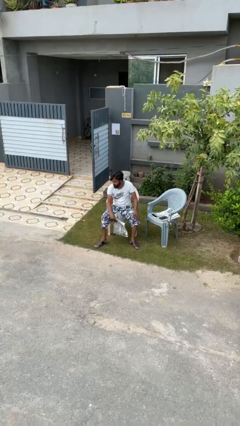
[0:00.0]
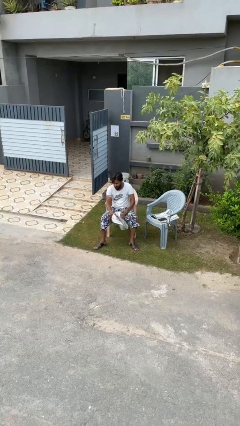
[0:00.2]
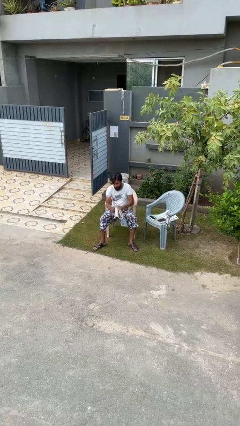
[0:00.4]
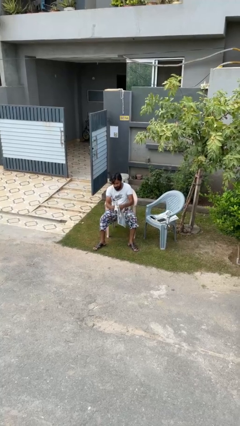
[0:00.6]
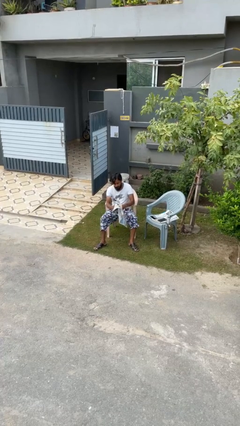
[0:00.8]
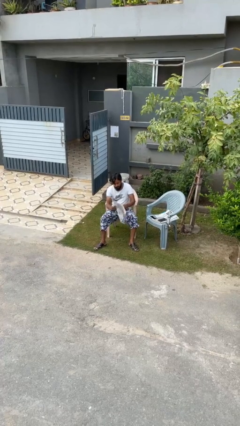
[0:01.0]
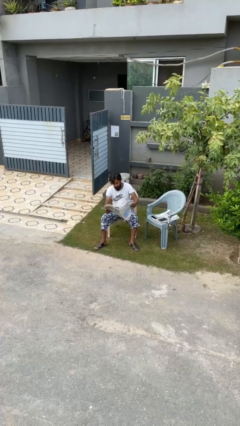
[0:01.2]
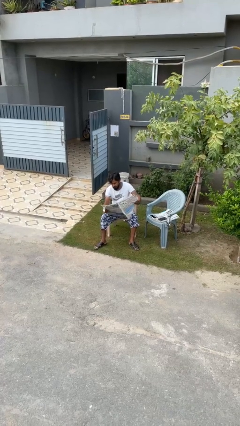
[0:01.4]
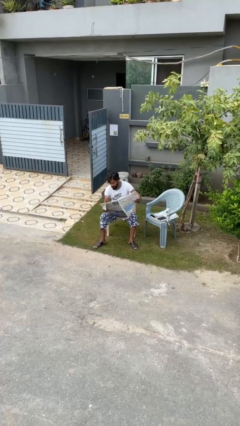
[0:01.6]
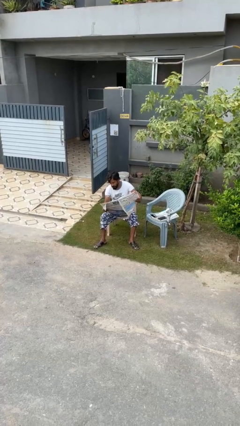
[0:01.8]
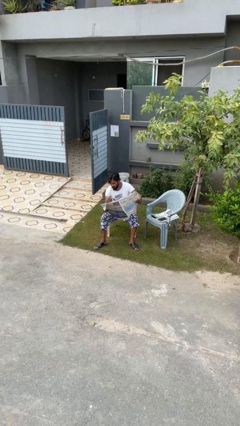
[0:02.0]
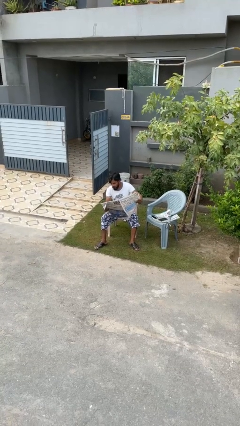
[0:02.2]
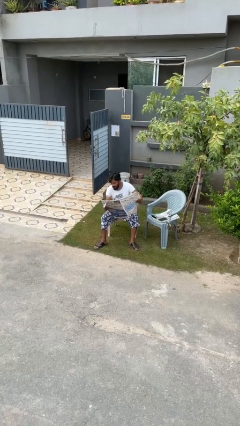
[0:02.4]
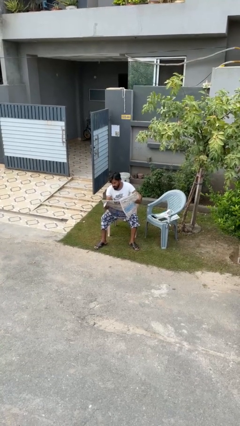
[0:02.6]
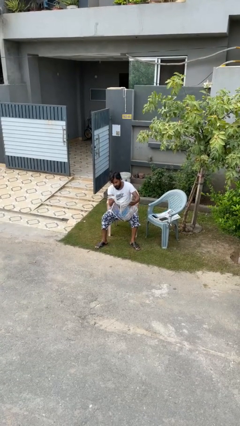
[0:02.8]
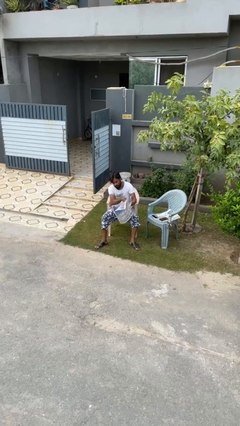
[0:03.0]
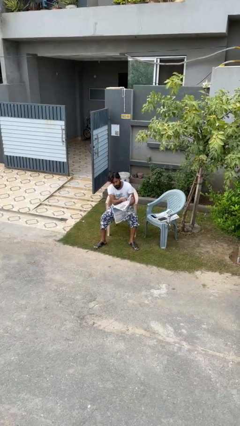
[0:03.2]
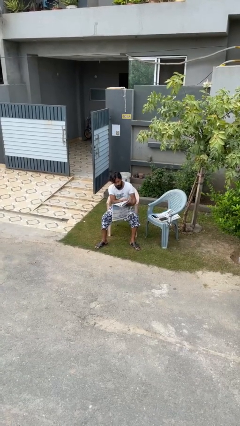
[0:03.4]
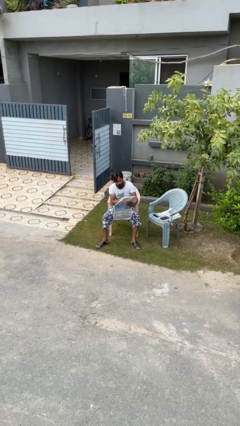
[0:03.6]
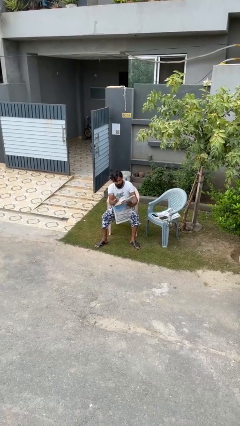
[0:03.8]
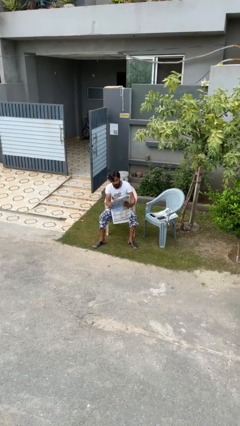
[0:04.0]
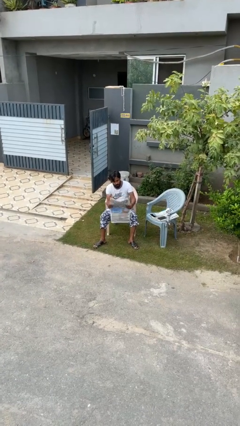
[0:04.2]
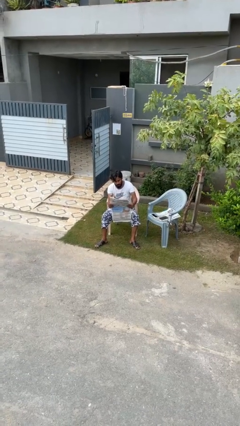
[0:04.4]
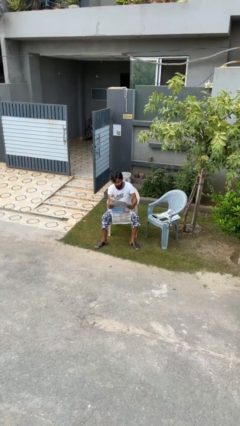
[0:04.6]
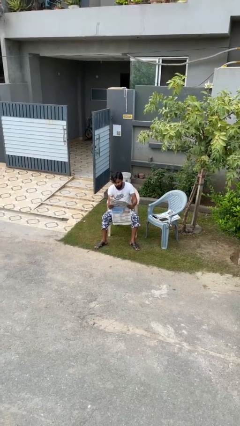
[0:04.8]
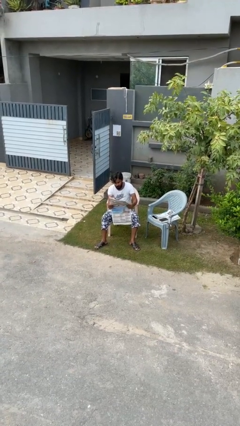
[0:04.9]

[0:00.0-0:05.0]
person reads newspaper

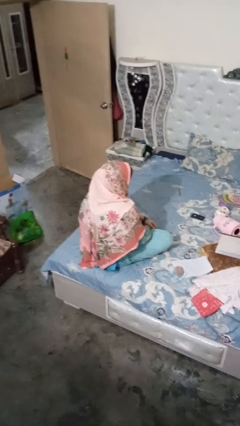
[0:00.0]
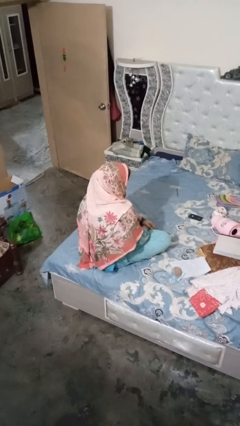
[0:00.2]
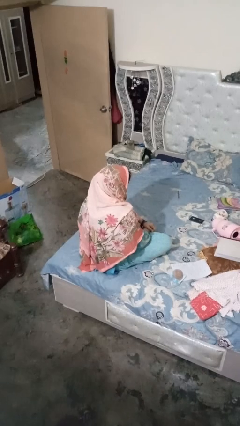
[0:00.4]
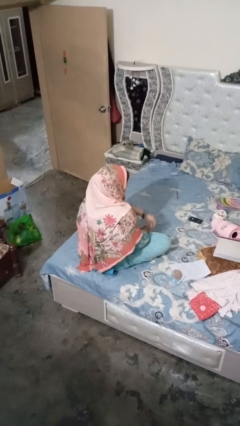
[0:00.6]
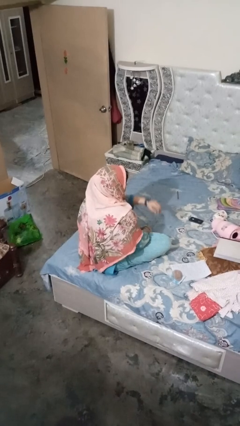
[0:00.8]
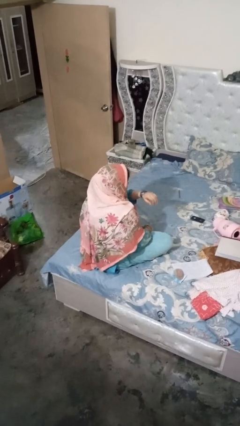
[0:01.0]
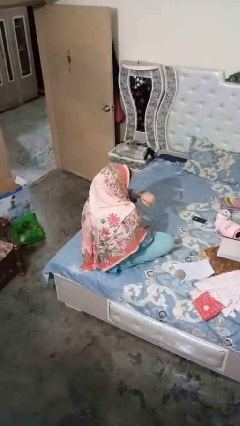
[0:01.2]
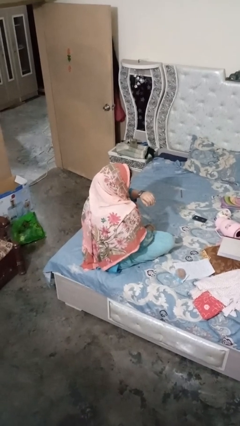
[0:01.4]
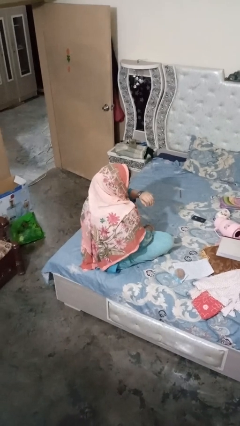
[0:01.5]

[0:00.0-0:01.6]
person gestures watch closely

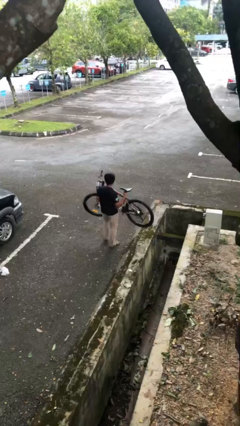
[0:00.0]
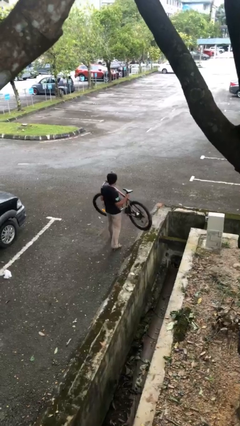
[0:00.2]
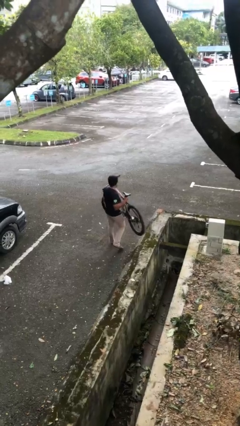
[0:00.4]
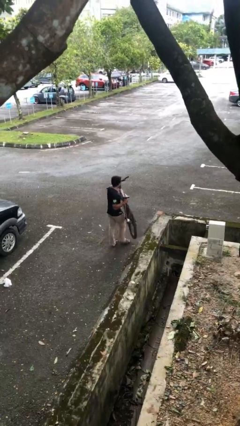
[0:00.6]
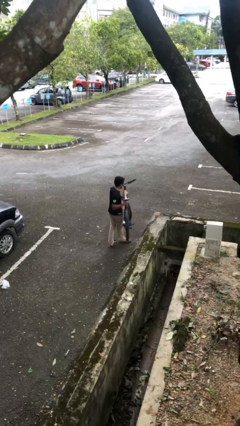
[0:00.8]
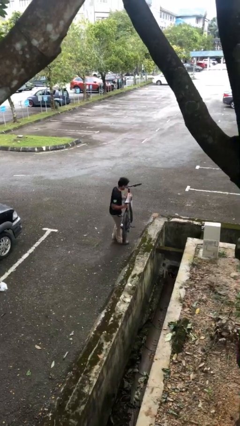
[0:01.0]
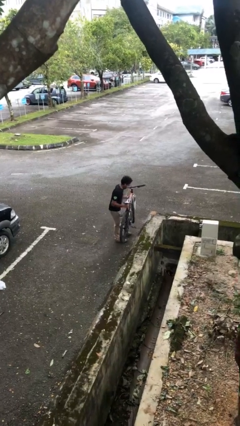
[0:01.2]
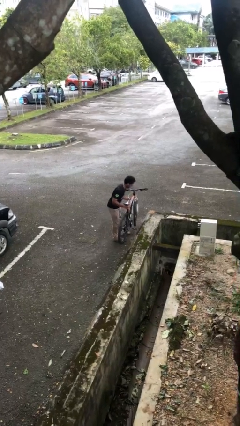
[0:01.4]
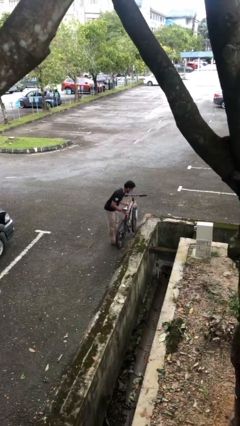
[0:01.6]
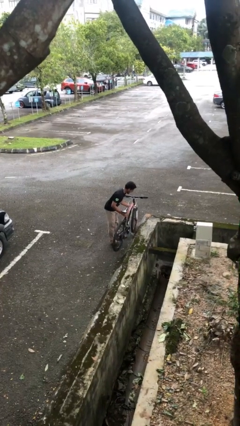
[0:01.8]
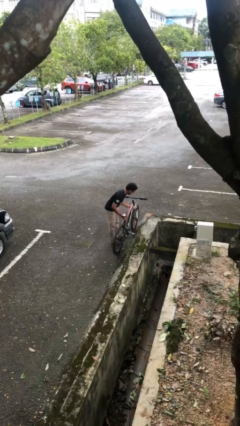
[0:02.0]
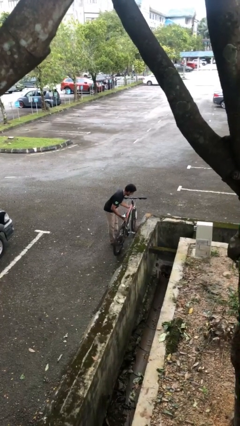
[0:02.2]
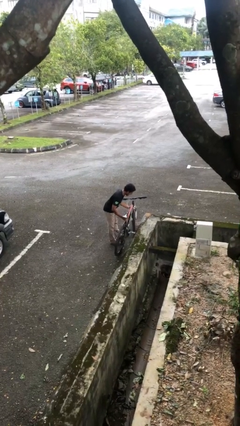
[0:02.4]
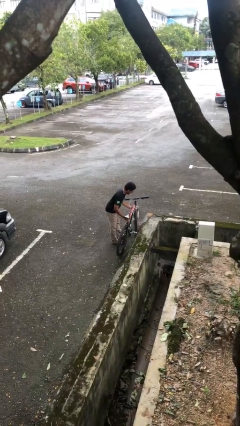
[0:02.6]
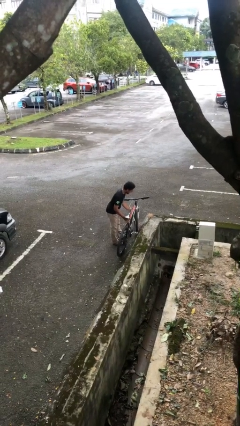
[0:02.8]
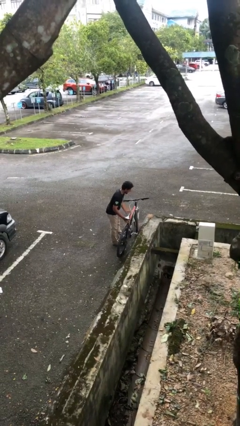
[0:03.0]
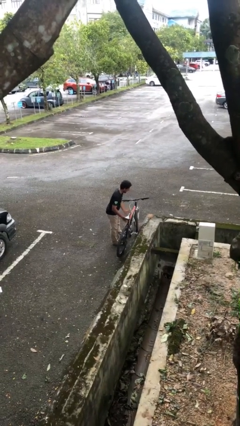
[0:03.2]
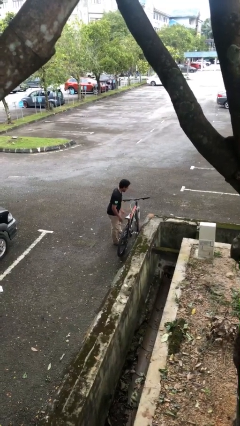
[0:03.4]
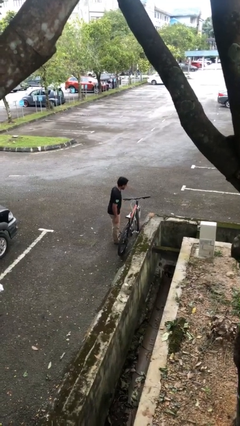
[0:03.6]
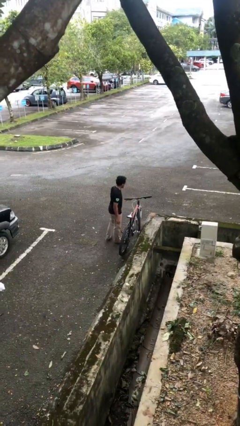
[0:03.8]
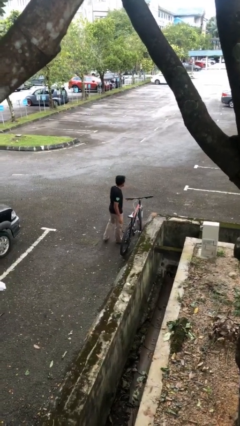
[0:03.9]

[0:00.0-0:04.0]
person puts down object on floor

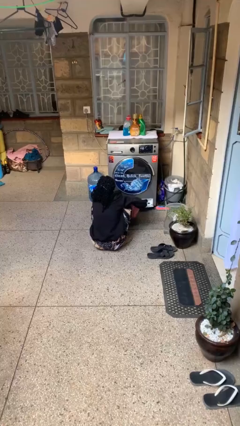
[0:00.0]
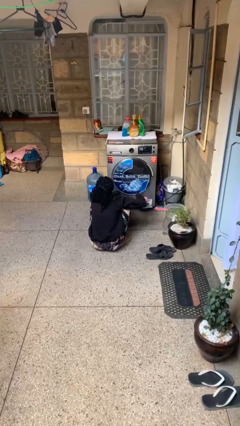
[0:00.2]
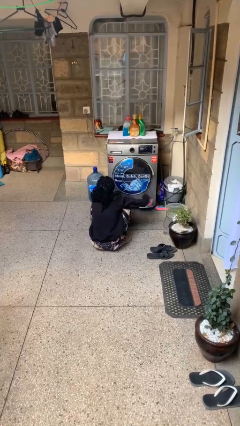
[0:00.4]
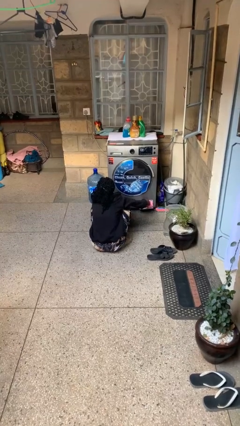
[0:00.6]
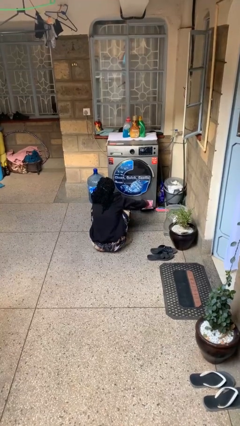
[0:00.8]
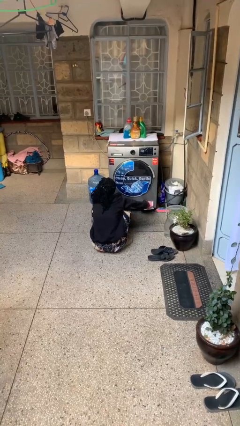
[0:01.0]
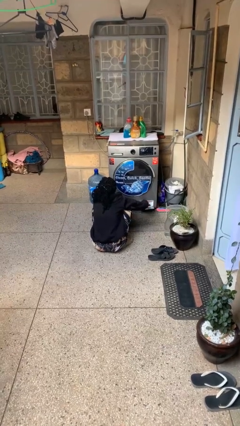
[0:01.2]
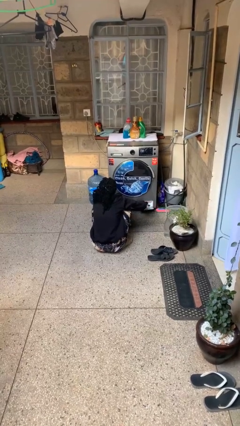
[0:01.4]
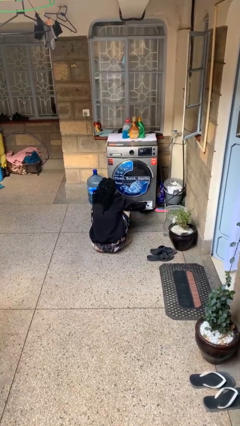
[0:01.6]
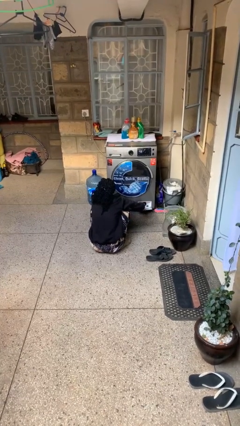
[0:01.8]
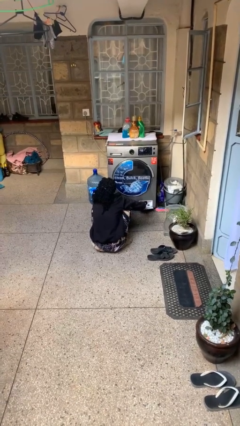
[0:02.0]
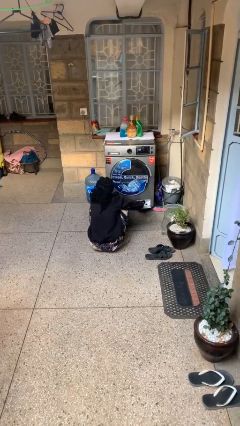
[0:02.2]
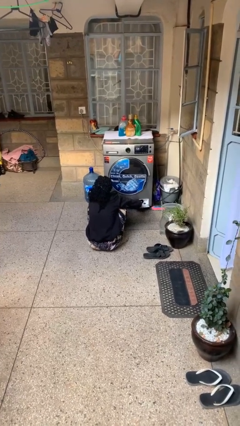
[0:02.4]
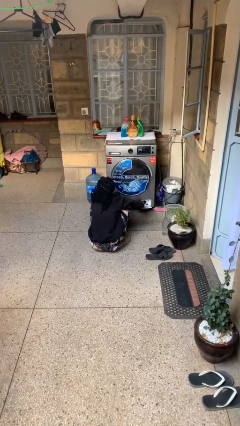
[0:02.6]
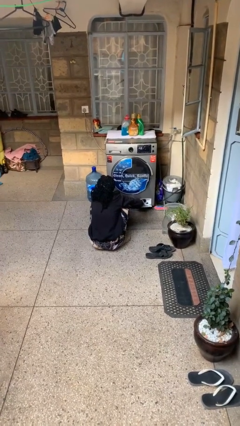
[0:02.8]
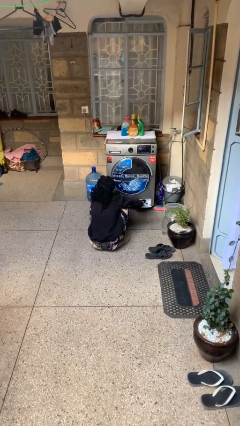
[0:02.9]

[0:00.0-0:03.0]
person cleans dryer lint trap

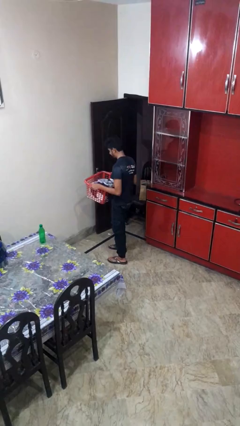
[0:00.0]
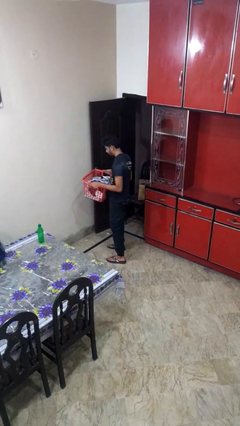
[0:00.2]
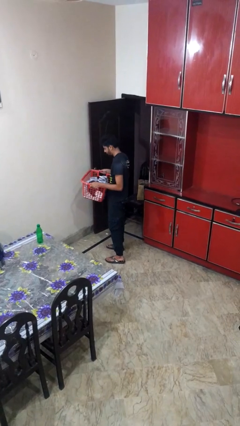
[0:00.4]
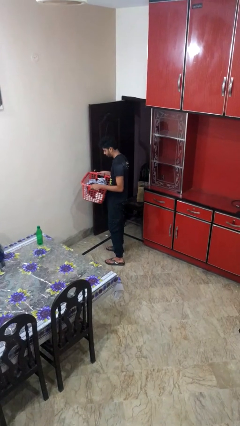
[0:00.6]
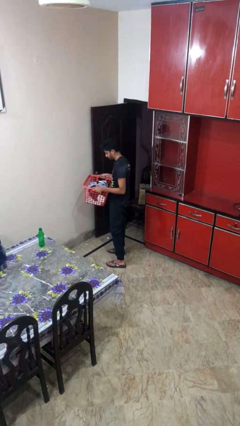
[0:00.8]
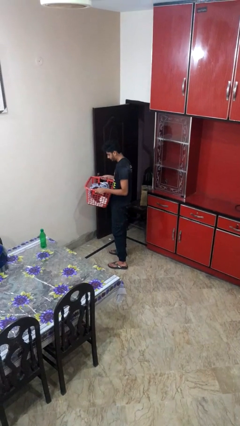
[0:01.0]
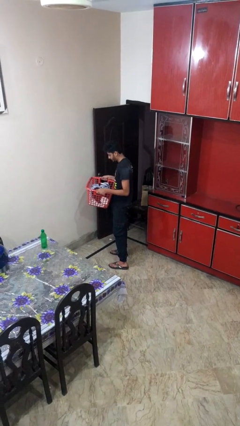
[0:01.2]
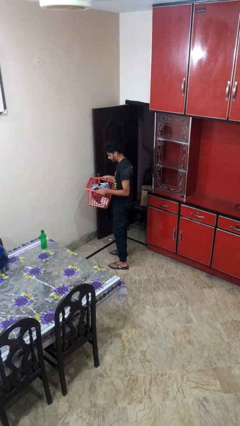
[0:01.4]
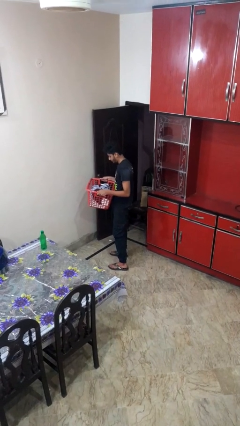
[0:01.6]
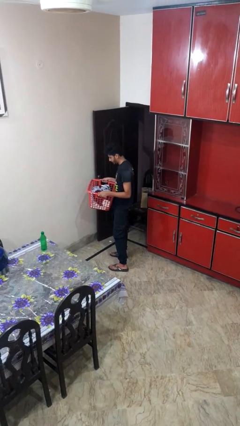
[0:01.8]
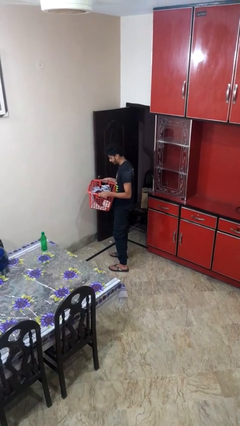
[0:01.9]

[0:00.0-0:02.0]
person carries furniture

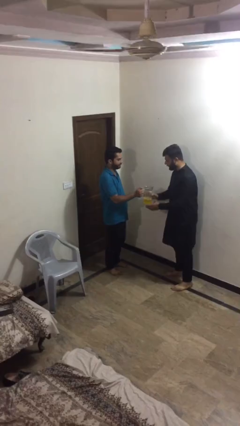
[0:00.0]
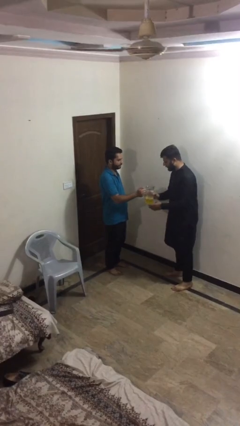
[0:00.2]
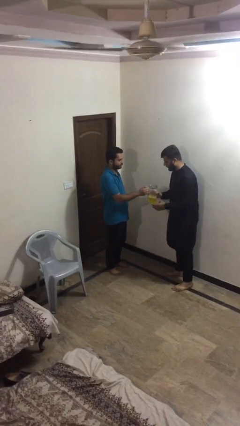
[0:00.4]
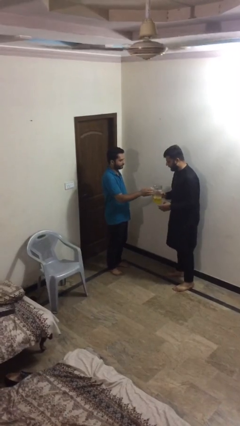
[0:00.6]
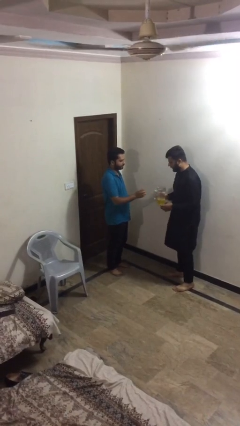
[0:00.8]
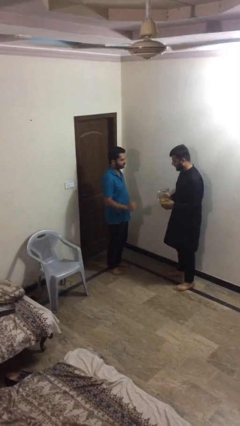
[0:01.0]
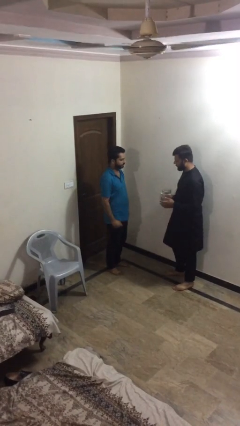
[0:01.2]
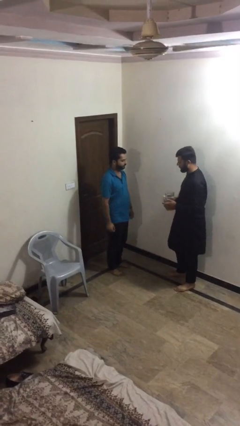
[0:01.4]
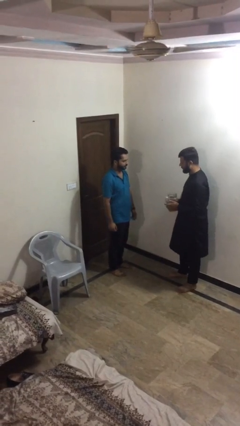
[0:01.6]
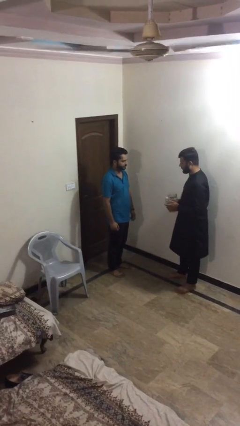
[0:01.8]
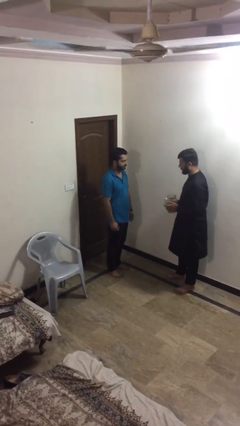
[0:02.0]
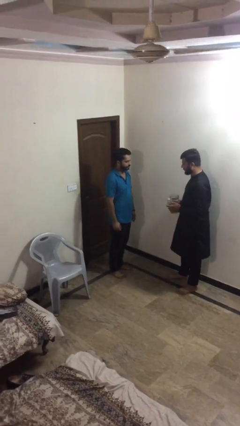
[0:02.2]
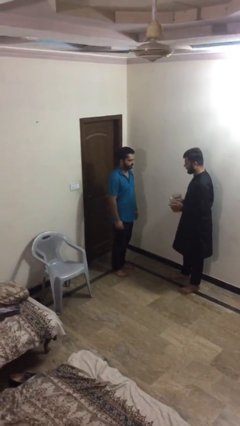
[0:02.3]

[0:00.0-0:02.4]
person transfers object to person
